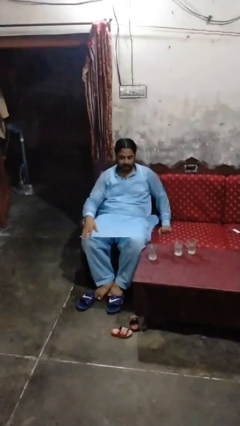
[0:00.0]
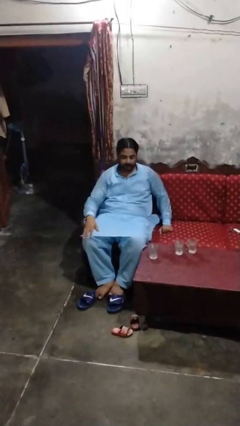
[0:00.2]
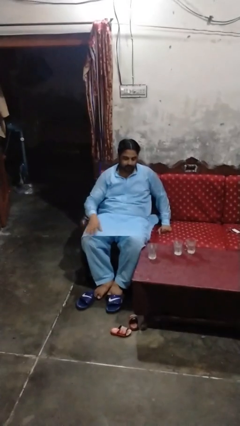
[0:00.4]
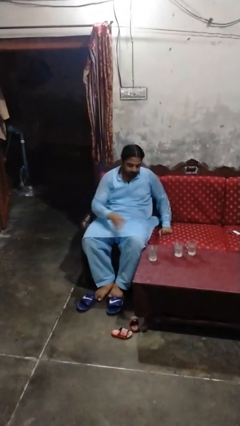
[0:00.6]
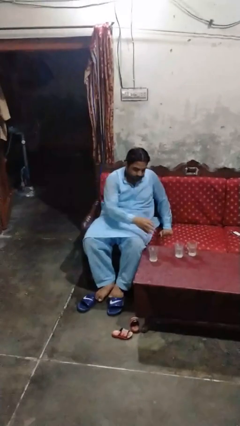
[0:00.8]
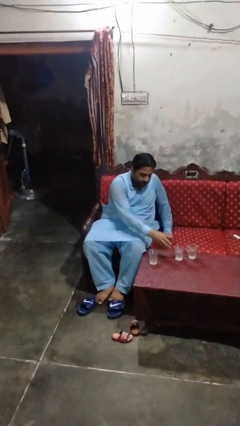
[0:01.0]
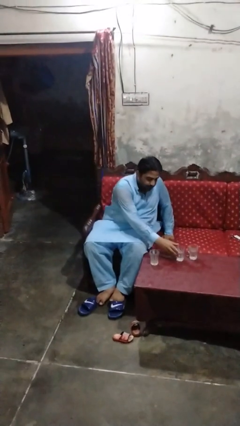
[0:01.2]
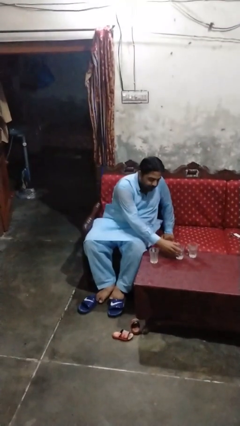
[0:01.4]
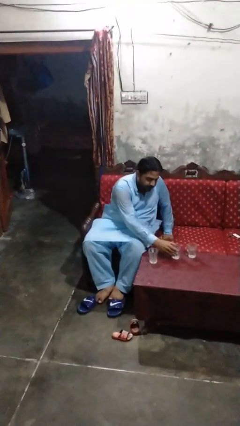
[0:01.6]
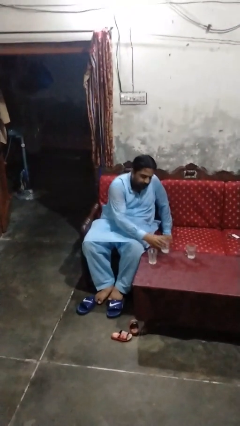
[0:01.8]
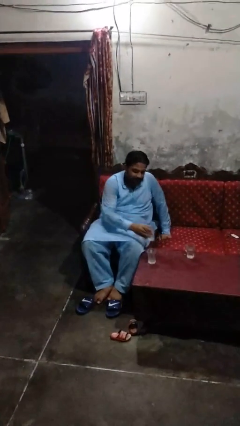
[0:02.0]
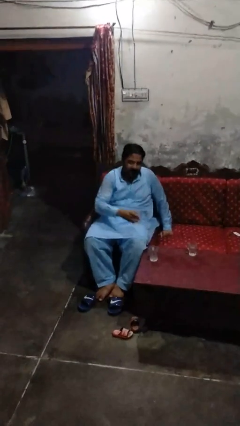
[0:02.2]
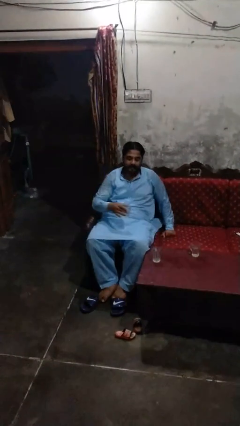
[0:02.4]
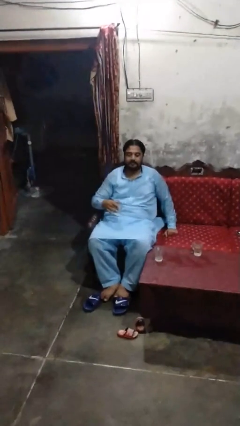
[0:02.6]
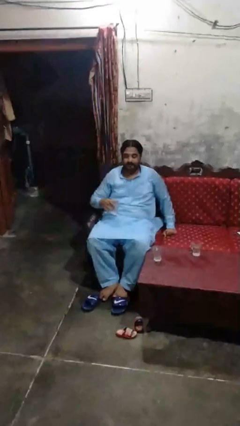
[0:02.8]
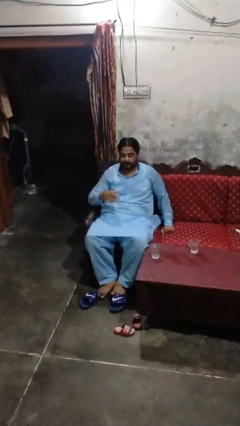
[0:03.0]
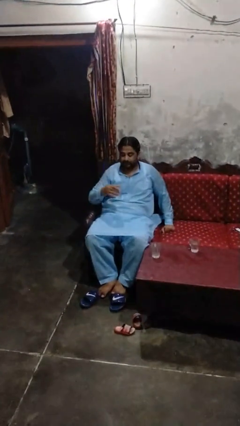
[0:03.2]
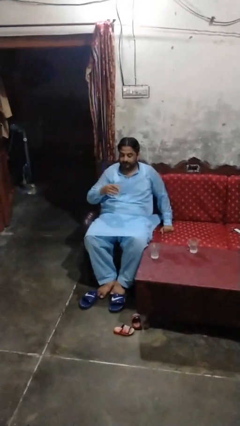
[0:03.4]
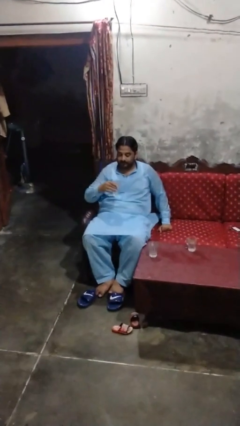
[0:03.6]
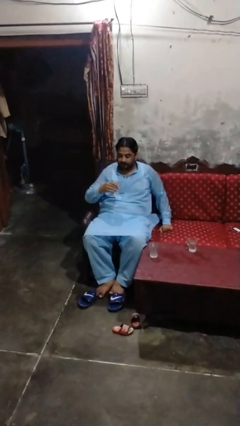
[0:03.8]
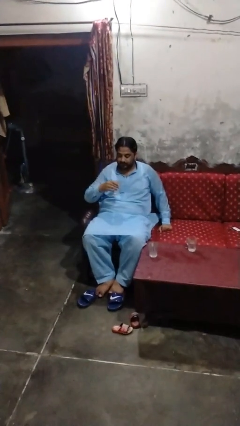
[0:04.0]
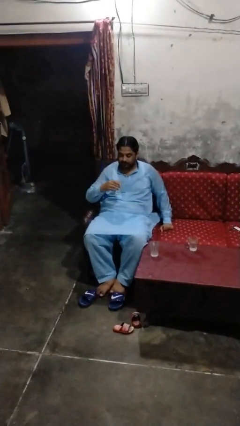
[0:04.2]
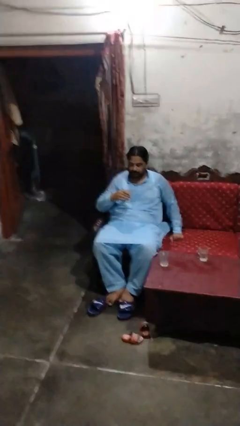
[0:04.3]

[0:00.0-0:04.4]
person picks up object from table

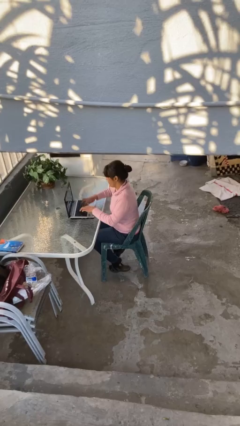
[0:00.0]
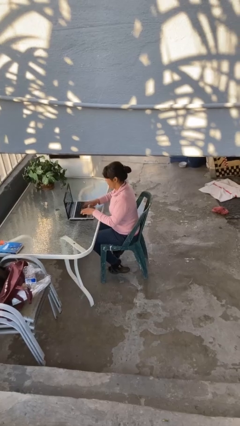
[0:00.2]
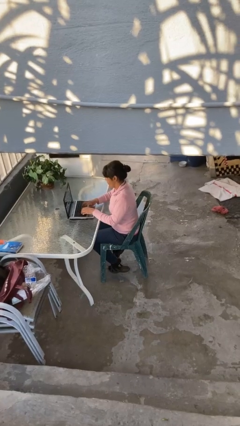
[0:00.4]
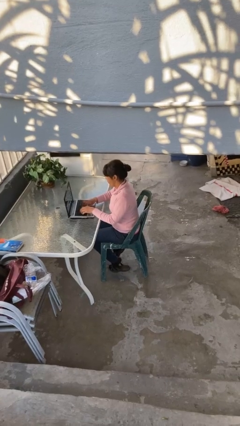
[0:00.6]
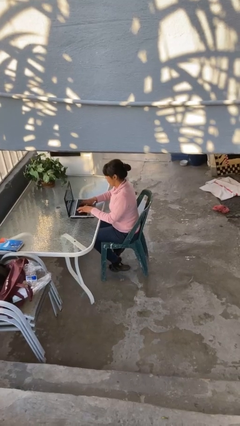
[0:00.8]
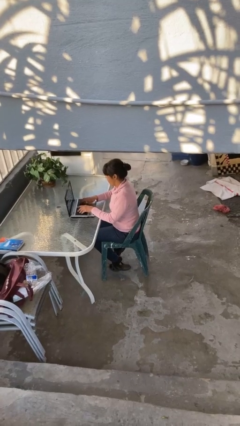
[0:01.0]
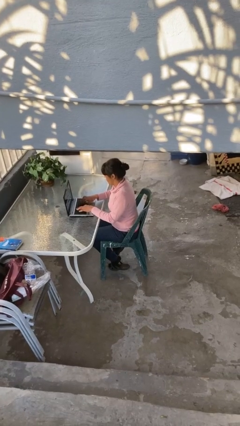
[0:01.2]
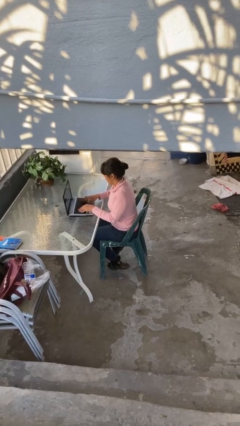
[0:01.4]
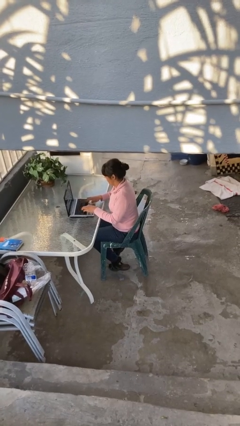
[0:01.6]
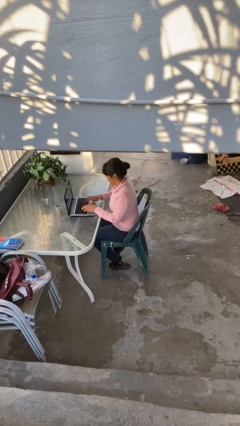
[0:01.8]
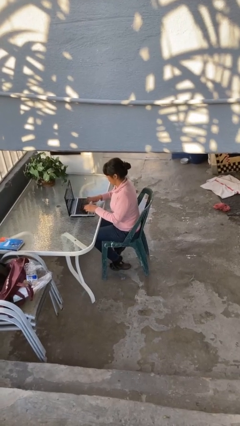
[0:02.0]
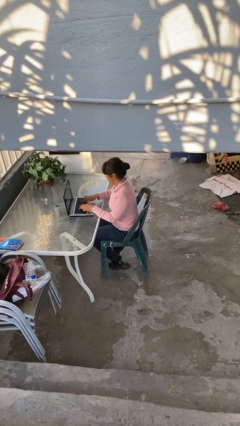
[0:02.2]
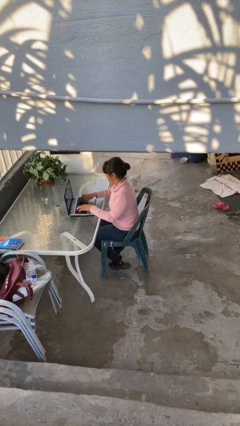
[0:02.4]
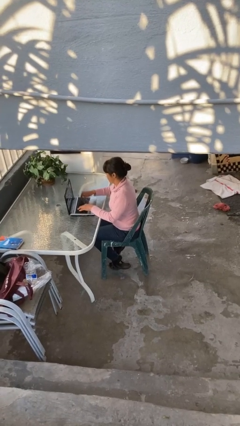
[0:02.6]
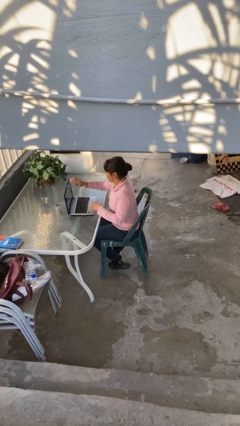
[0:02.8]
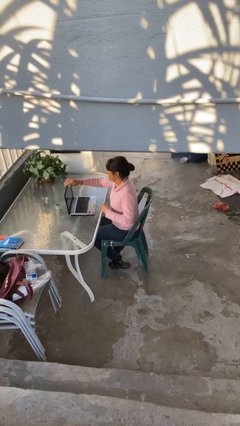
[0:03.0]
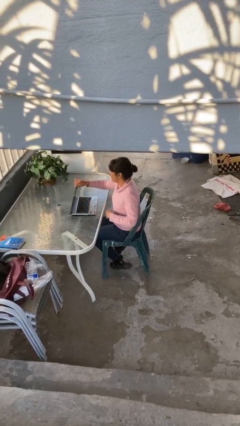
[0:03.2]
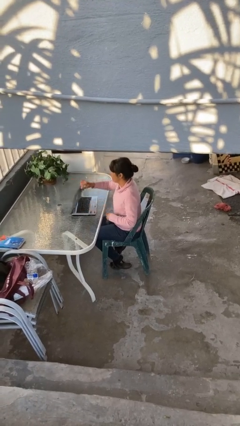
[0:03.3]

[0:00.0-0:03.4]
person interacts with laptop

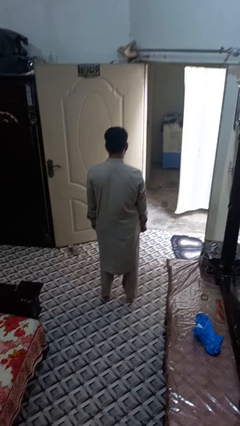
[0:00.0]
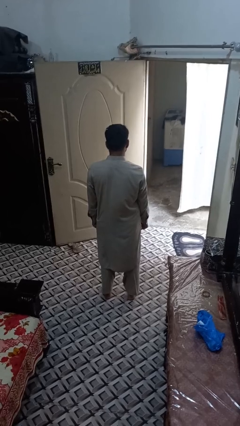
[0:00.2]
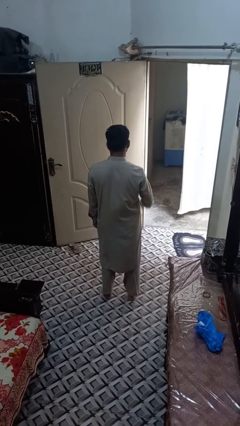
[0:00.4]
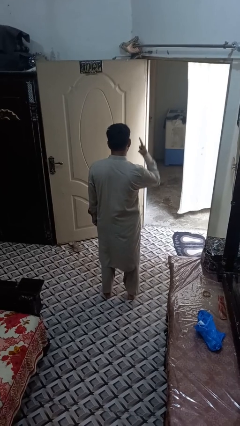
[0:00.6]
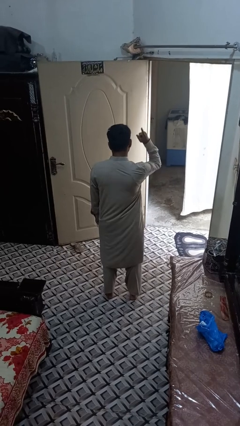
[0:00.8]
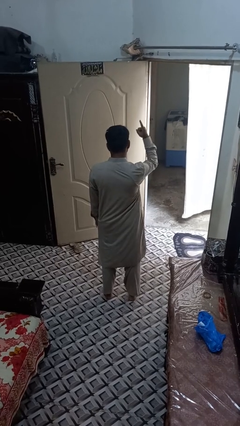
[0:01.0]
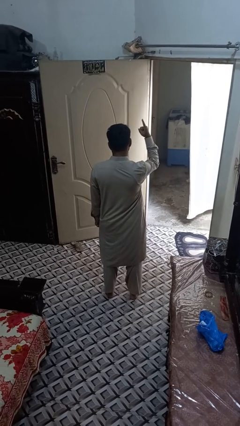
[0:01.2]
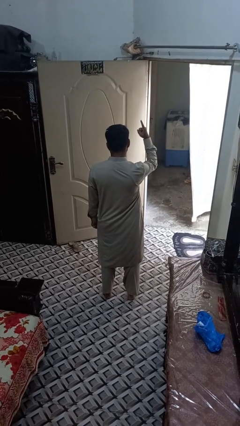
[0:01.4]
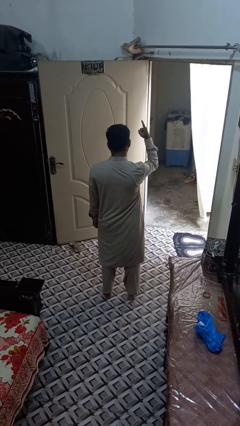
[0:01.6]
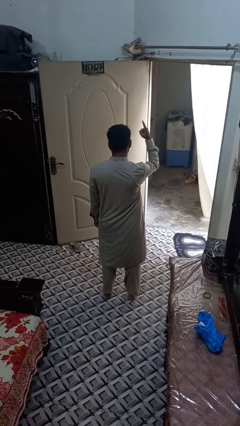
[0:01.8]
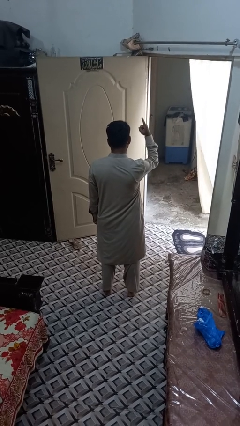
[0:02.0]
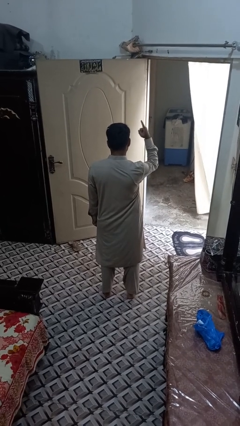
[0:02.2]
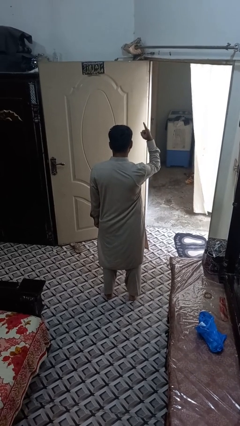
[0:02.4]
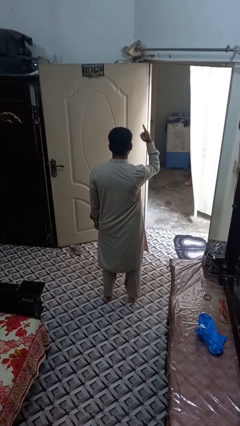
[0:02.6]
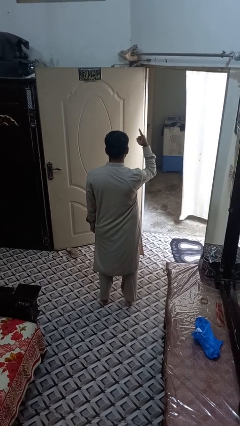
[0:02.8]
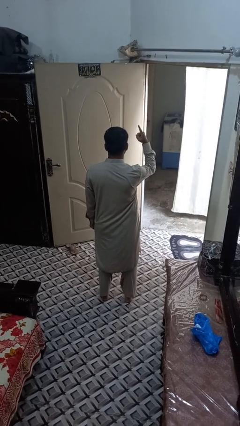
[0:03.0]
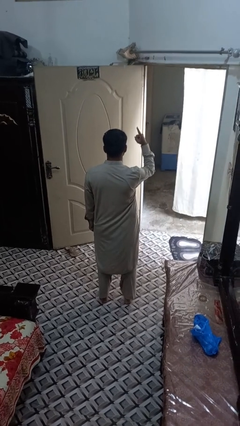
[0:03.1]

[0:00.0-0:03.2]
person gestures number one

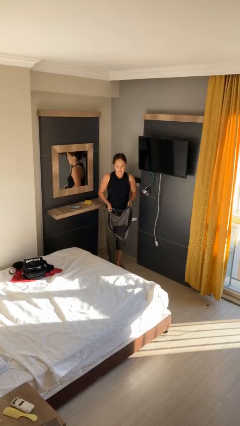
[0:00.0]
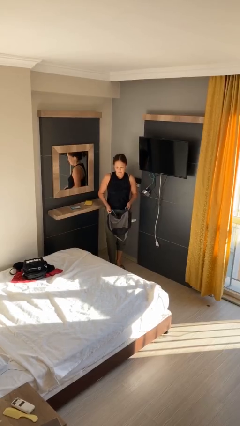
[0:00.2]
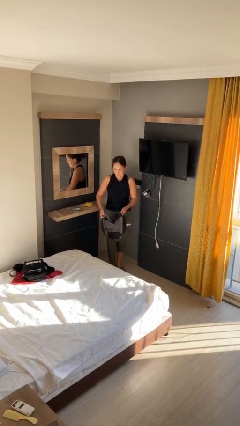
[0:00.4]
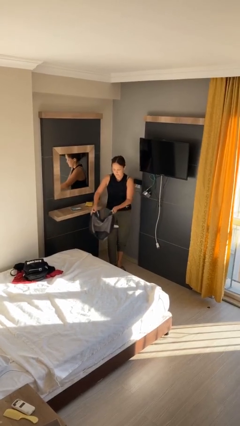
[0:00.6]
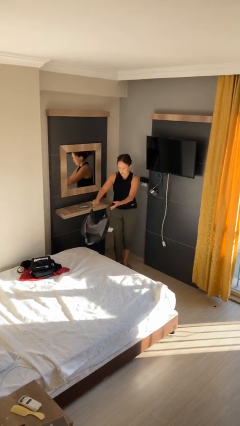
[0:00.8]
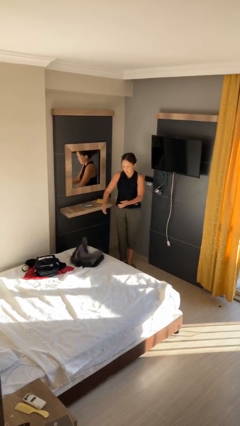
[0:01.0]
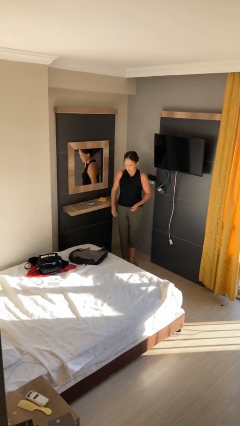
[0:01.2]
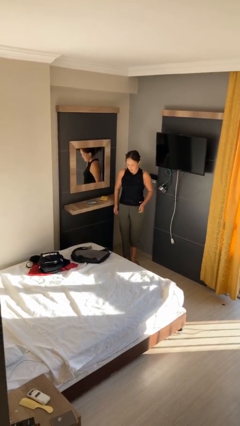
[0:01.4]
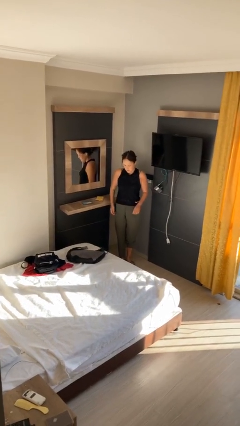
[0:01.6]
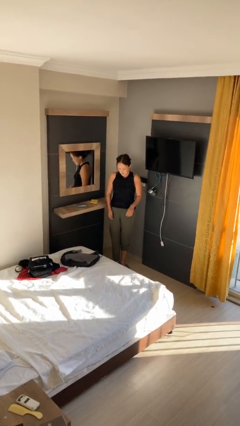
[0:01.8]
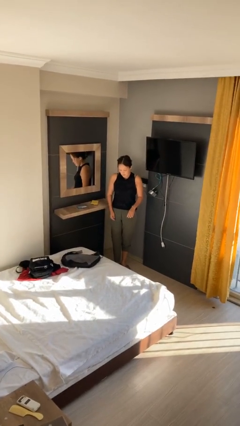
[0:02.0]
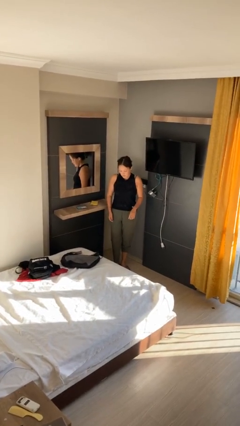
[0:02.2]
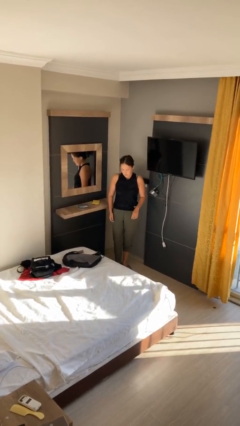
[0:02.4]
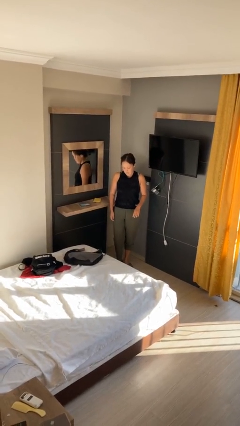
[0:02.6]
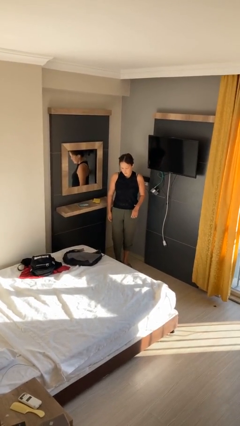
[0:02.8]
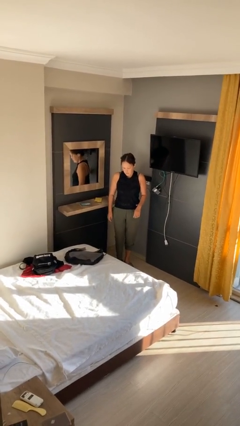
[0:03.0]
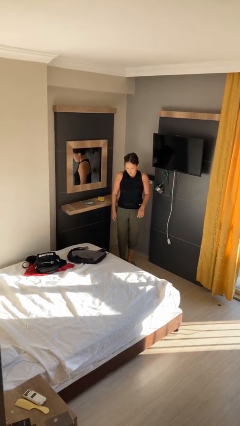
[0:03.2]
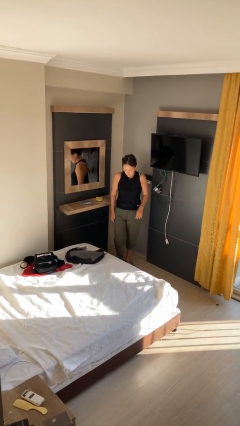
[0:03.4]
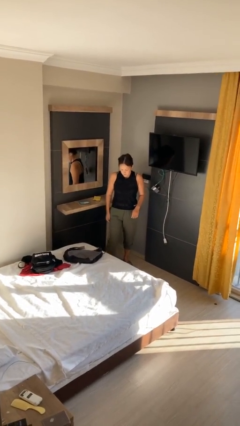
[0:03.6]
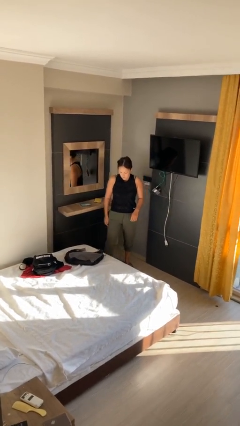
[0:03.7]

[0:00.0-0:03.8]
person throws object on bed

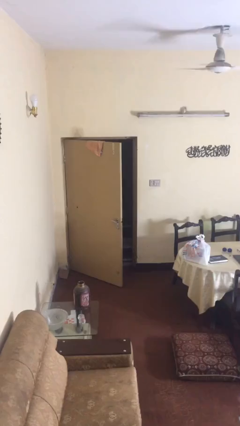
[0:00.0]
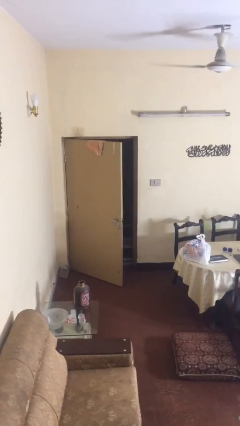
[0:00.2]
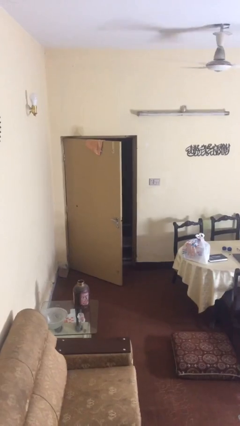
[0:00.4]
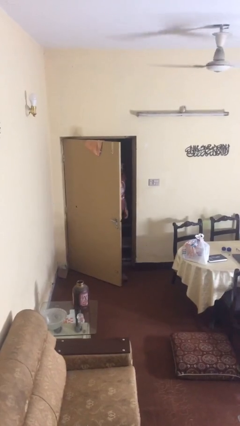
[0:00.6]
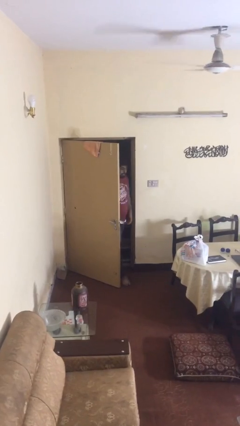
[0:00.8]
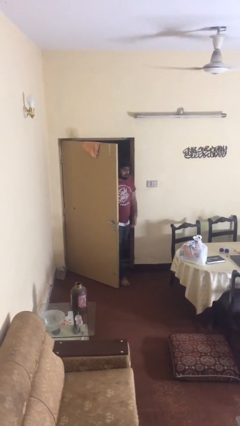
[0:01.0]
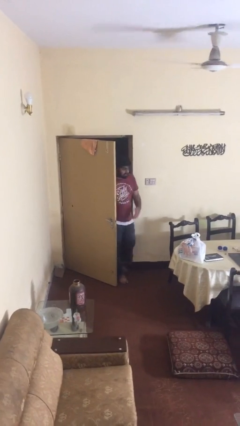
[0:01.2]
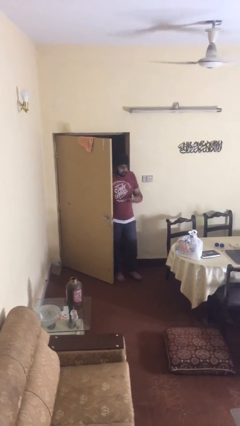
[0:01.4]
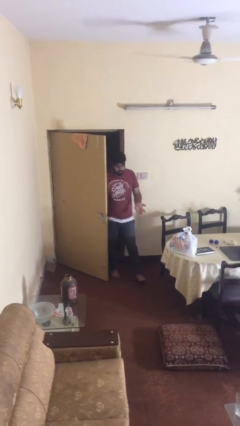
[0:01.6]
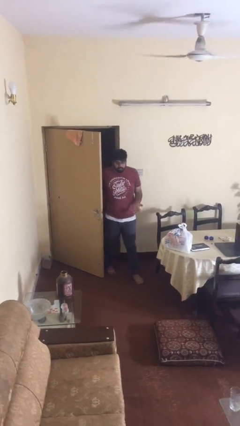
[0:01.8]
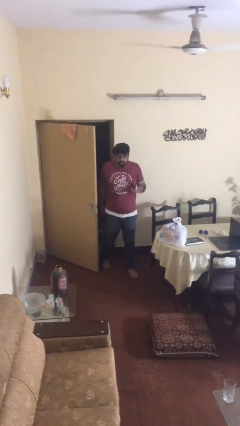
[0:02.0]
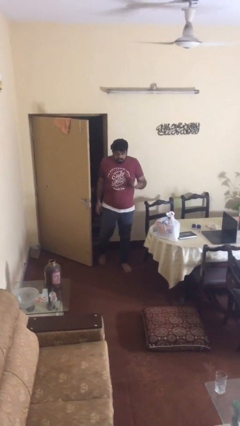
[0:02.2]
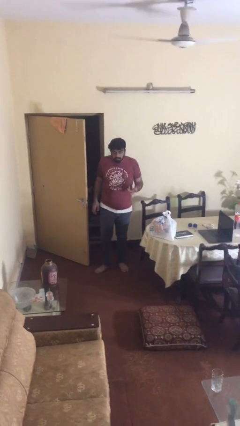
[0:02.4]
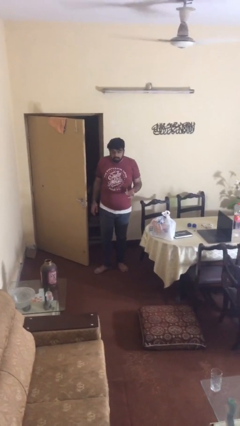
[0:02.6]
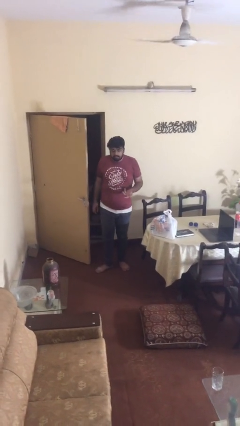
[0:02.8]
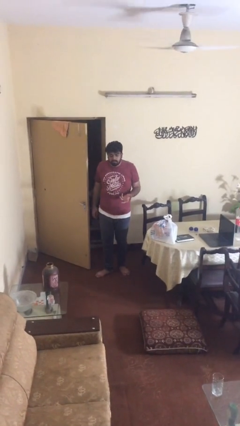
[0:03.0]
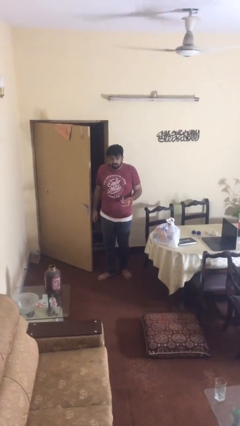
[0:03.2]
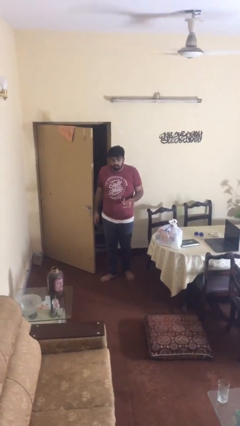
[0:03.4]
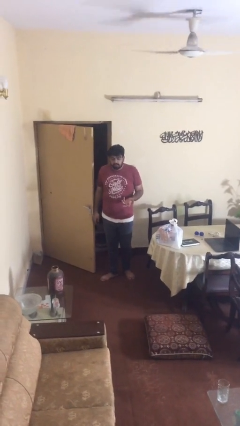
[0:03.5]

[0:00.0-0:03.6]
person enters scene through structure
